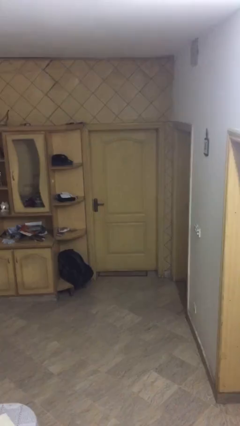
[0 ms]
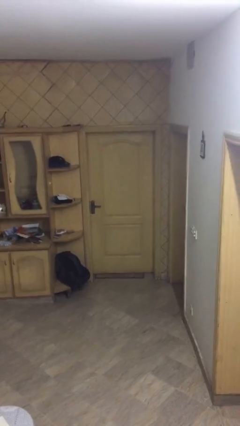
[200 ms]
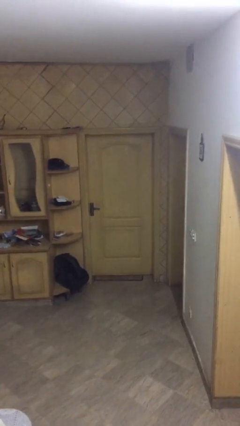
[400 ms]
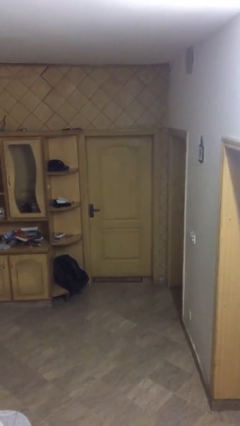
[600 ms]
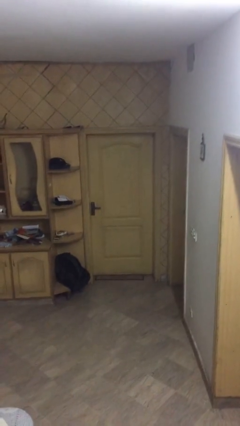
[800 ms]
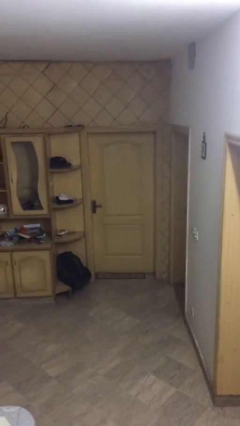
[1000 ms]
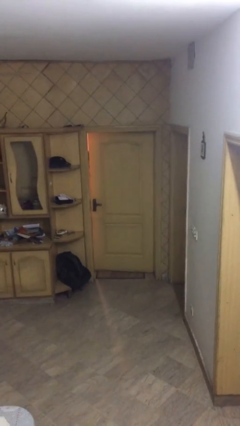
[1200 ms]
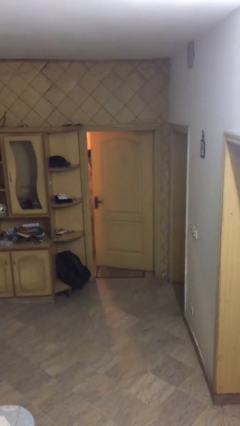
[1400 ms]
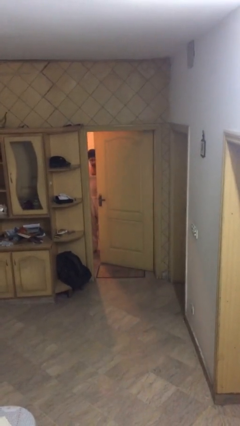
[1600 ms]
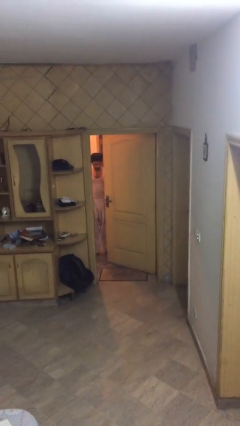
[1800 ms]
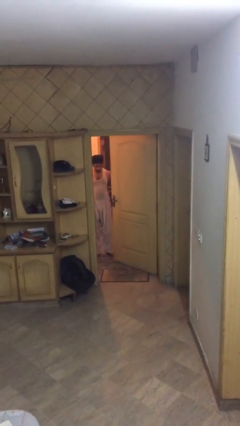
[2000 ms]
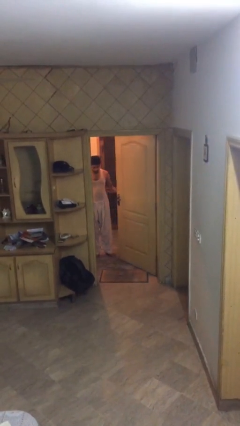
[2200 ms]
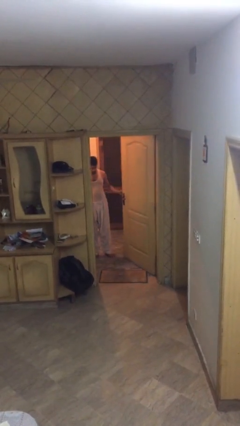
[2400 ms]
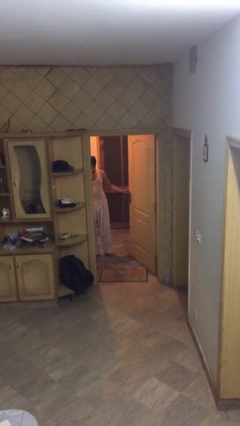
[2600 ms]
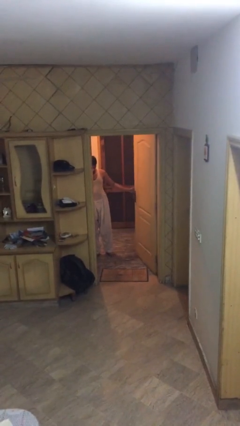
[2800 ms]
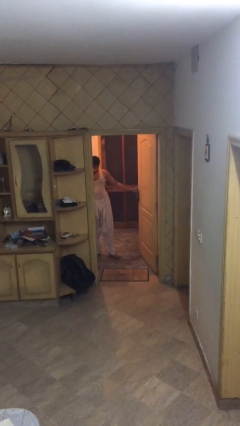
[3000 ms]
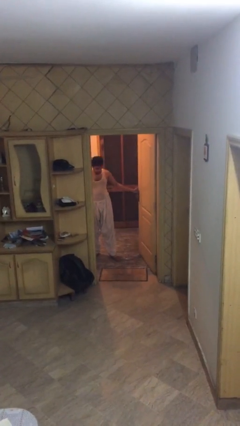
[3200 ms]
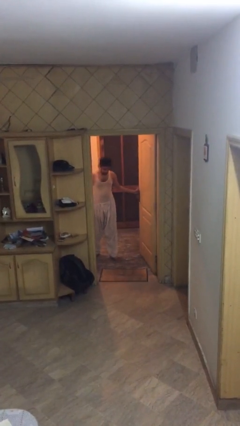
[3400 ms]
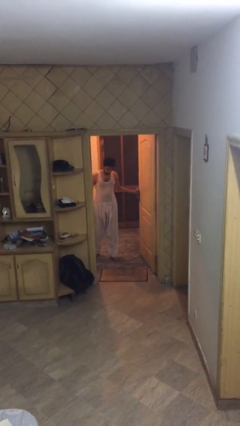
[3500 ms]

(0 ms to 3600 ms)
person opens facility door

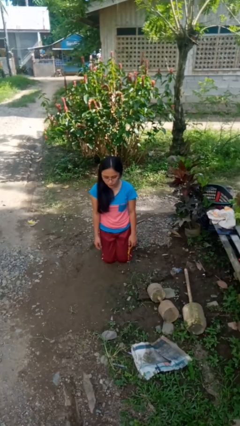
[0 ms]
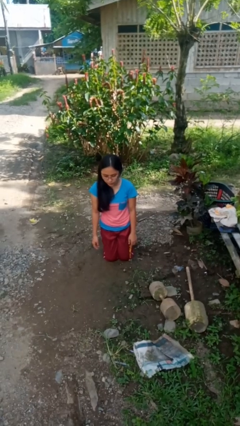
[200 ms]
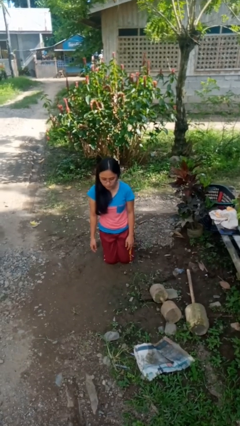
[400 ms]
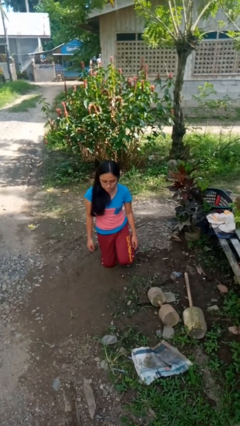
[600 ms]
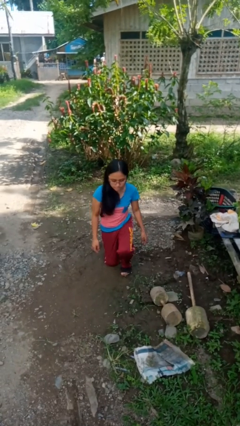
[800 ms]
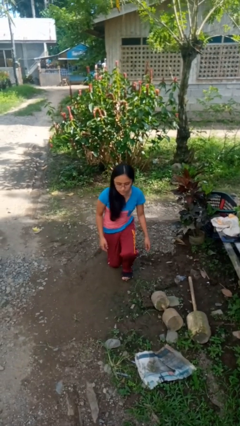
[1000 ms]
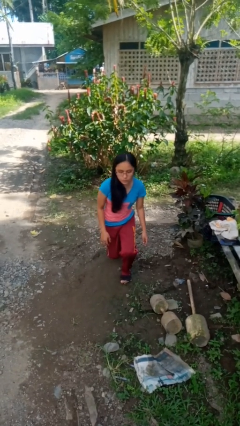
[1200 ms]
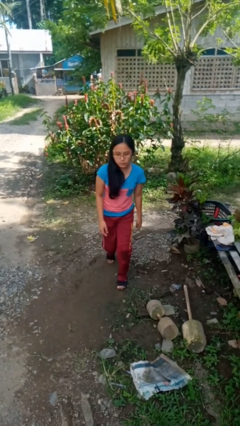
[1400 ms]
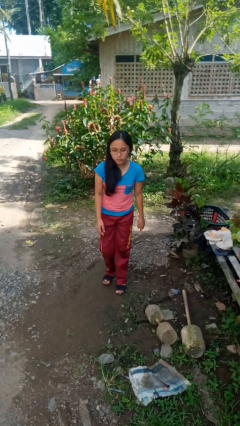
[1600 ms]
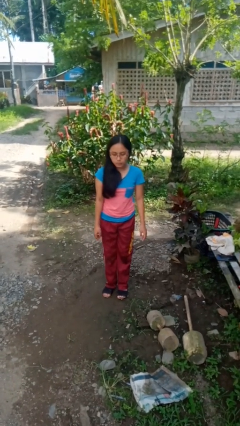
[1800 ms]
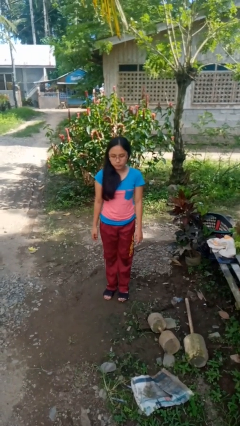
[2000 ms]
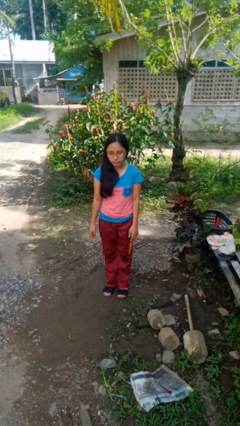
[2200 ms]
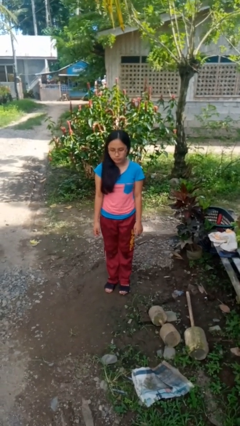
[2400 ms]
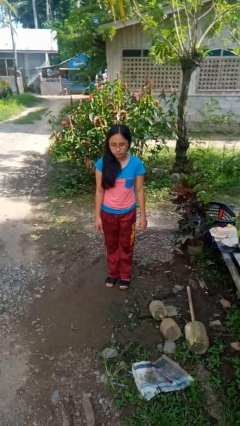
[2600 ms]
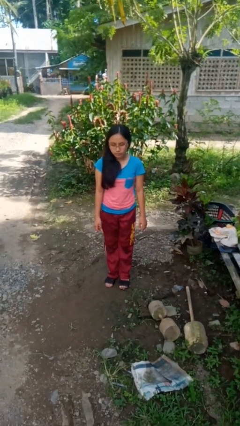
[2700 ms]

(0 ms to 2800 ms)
person stands up from floor

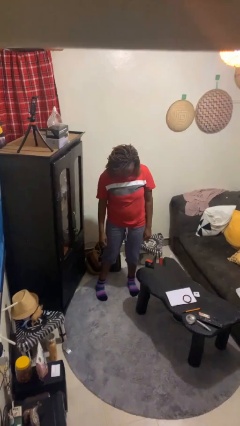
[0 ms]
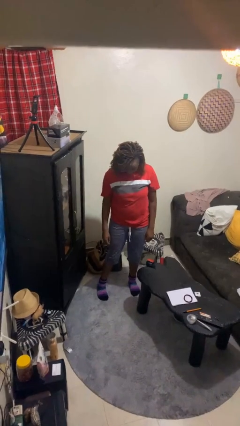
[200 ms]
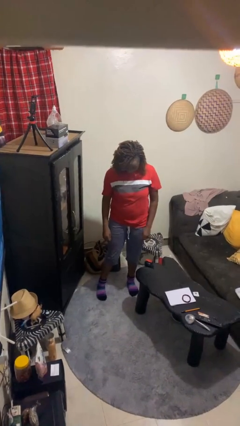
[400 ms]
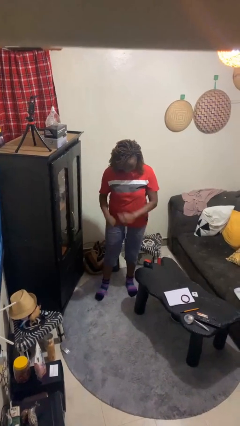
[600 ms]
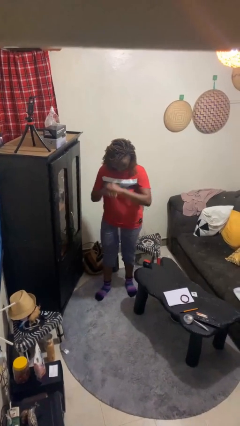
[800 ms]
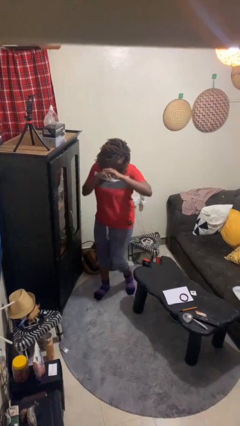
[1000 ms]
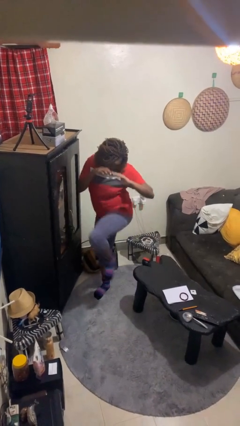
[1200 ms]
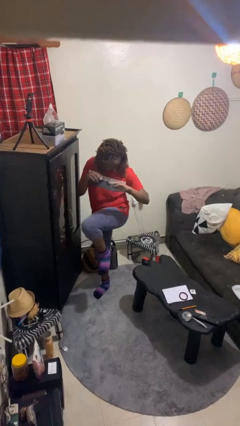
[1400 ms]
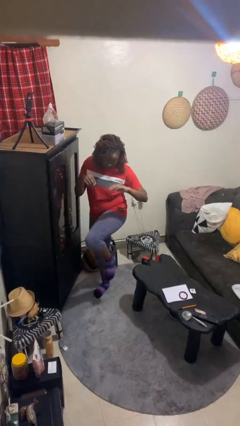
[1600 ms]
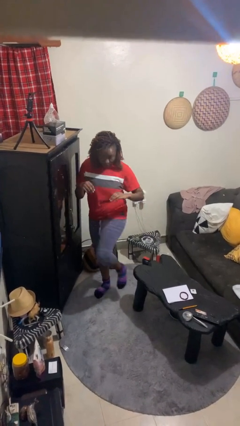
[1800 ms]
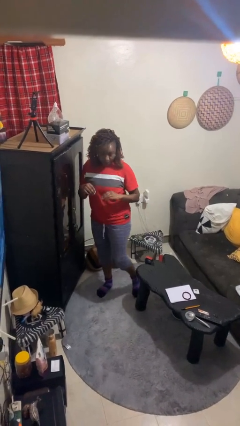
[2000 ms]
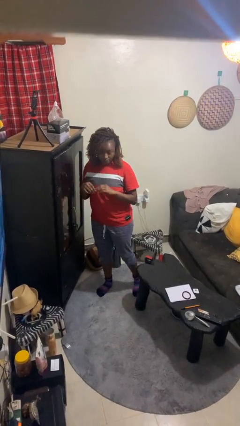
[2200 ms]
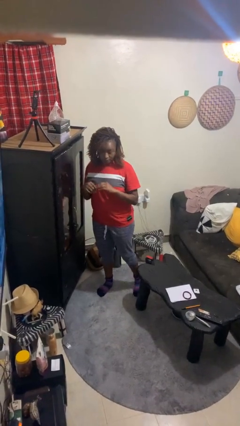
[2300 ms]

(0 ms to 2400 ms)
person karate kicks

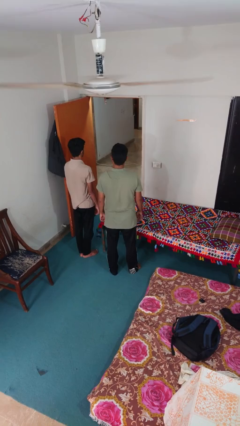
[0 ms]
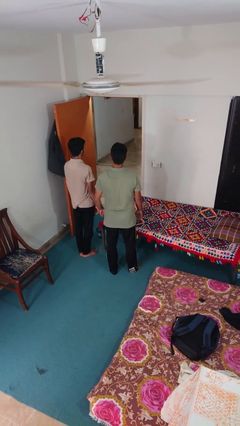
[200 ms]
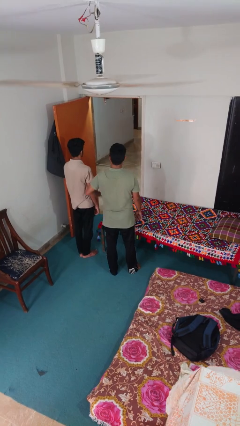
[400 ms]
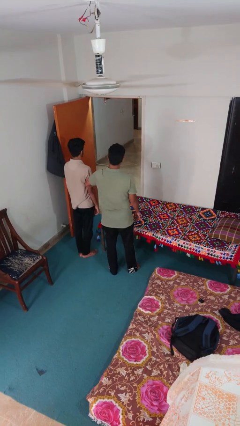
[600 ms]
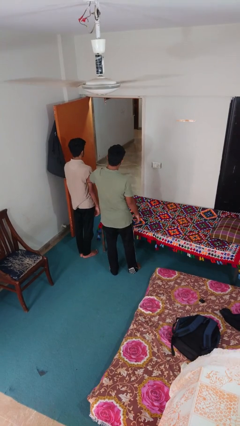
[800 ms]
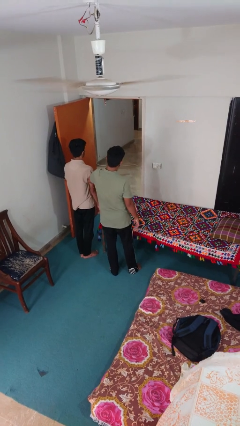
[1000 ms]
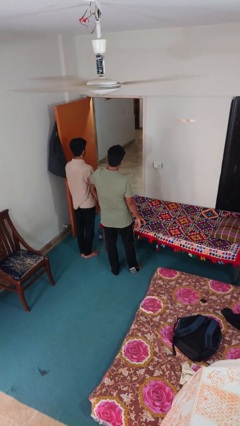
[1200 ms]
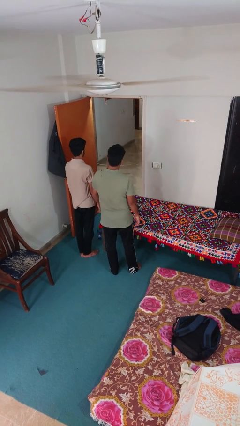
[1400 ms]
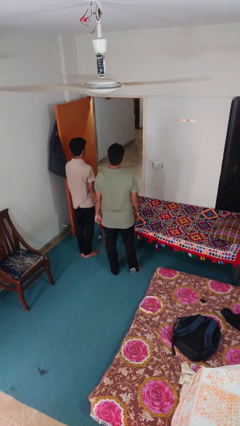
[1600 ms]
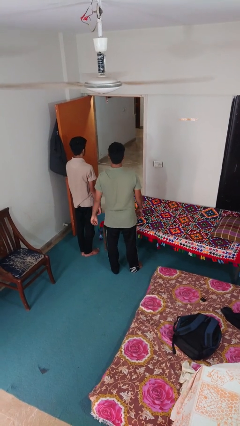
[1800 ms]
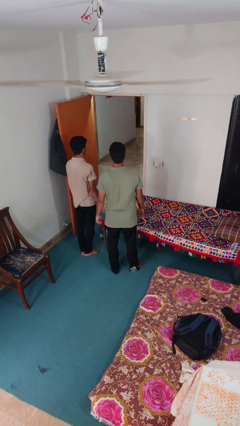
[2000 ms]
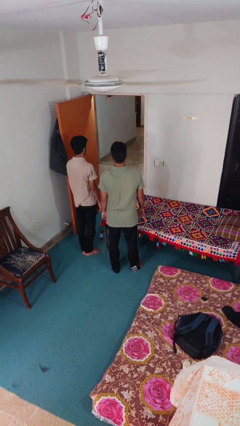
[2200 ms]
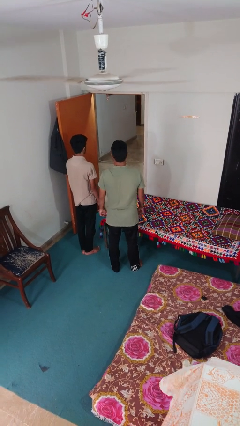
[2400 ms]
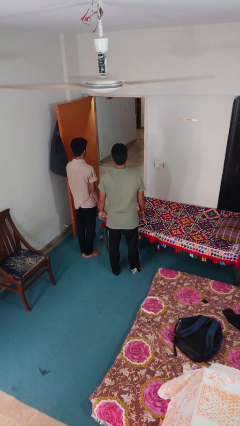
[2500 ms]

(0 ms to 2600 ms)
person nudges person with elbow

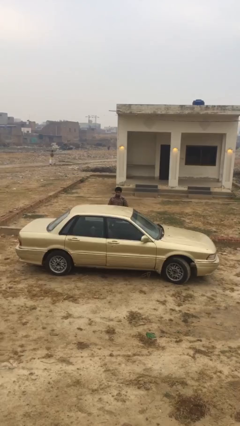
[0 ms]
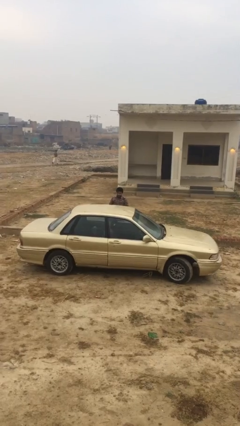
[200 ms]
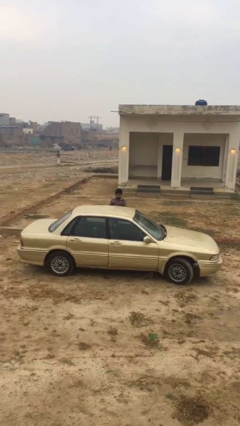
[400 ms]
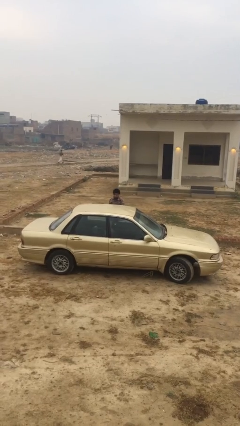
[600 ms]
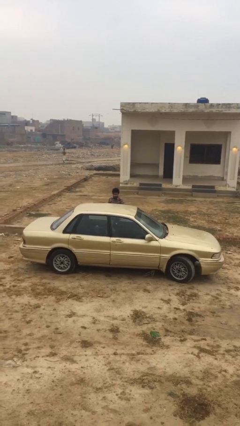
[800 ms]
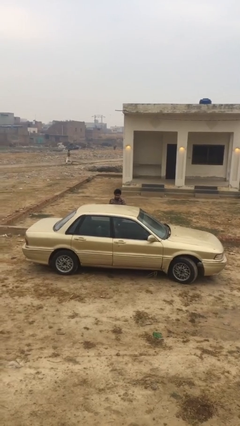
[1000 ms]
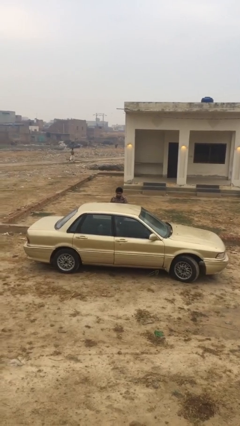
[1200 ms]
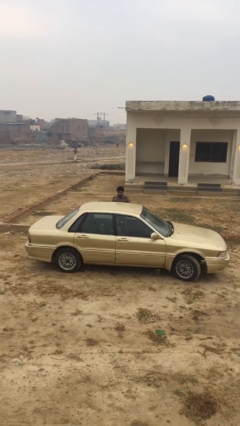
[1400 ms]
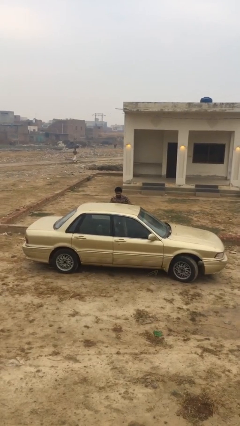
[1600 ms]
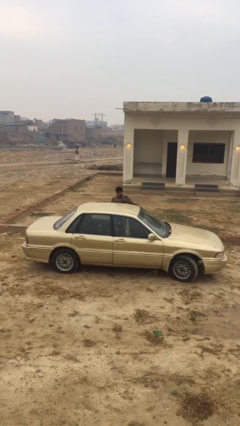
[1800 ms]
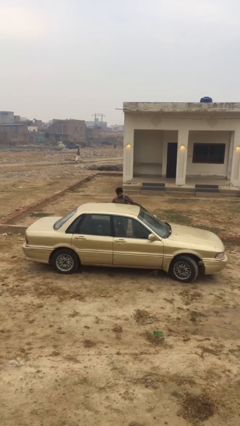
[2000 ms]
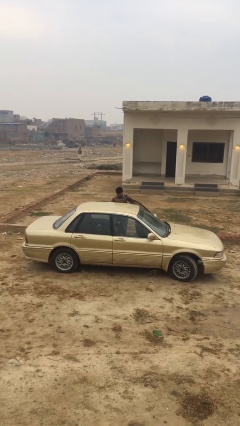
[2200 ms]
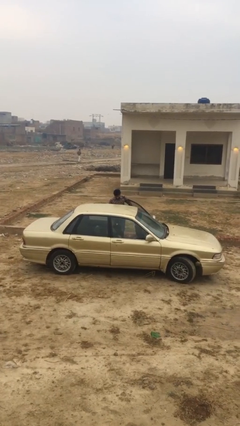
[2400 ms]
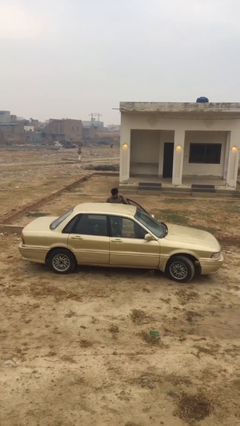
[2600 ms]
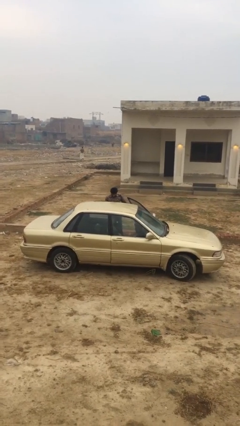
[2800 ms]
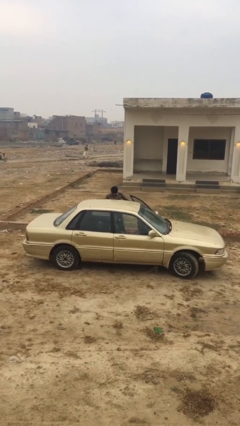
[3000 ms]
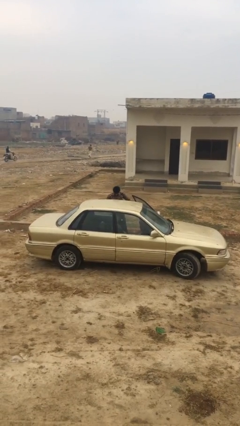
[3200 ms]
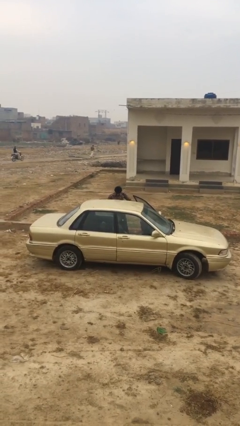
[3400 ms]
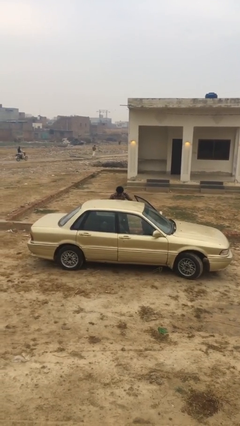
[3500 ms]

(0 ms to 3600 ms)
person opens car door

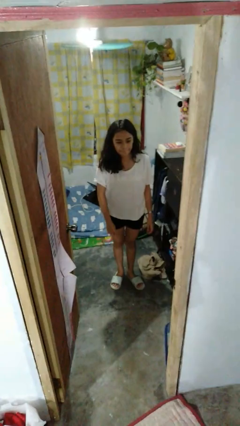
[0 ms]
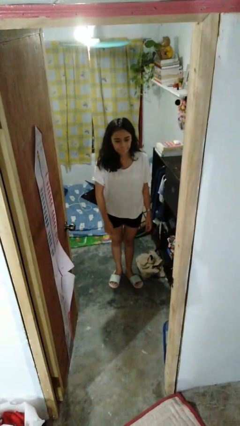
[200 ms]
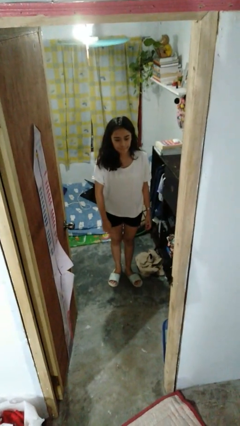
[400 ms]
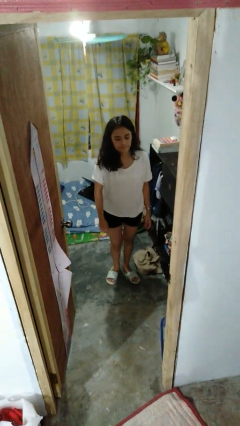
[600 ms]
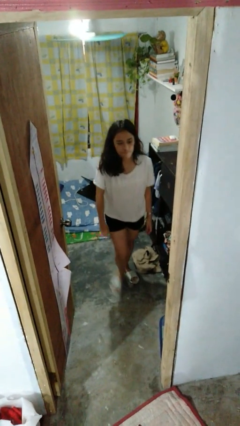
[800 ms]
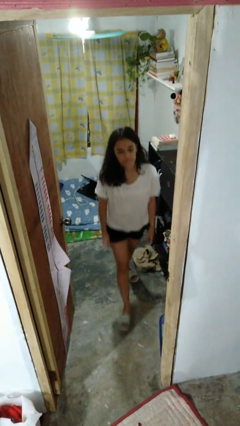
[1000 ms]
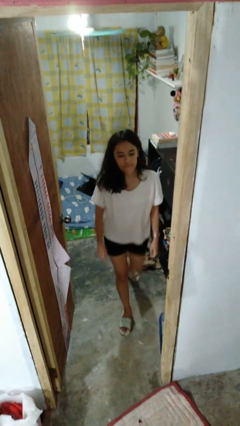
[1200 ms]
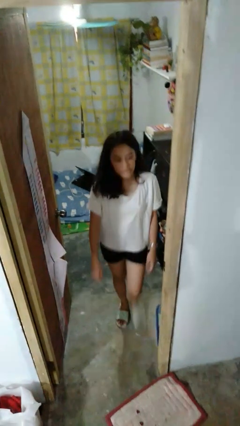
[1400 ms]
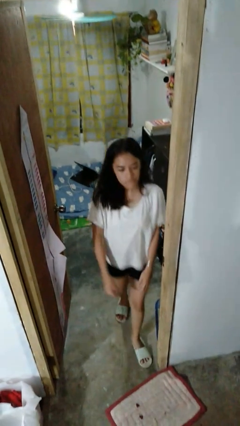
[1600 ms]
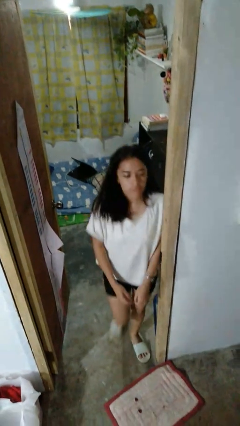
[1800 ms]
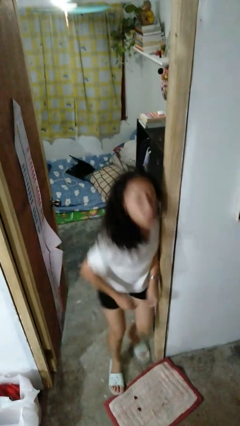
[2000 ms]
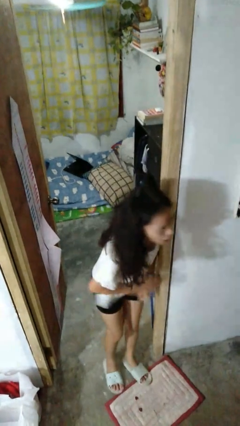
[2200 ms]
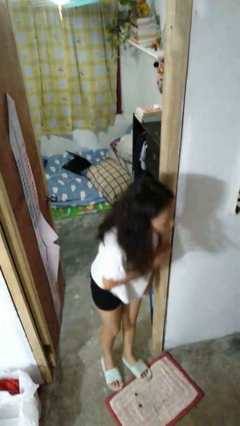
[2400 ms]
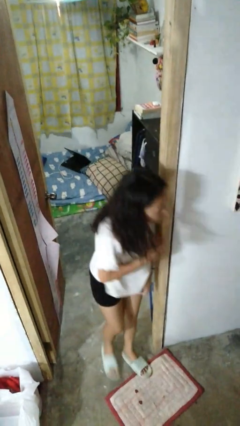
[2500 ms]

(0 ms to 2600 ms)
person bumps into wall

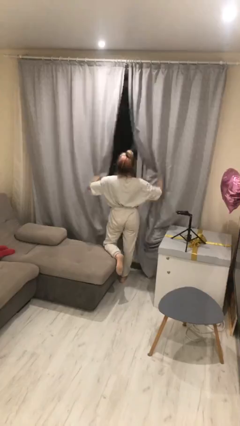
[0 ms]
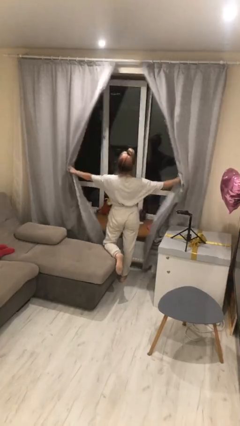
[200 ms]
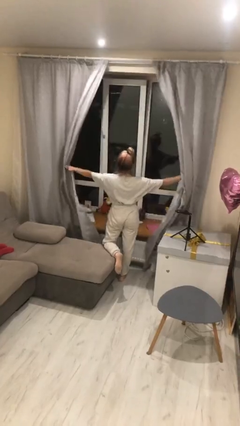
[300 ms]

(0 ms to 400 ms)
person opens curtains
